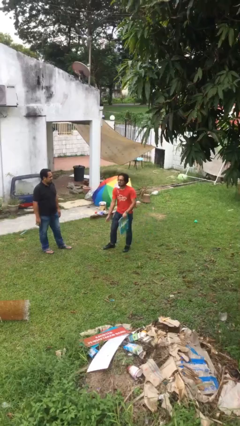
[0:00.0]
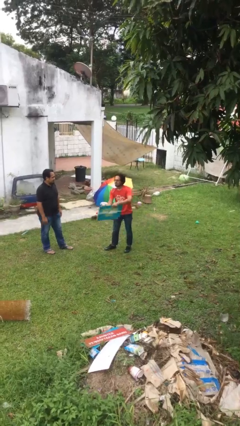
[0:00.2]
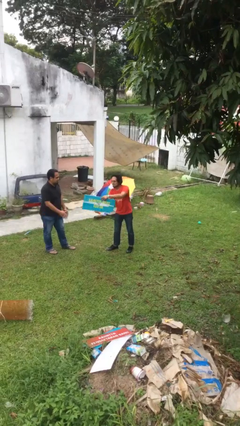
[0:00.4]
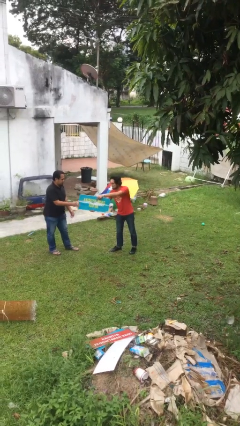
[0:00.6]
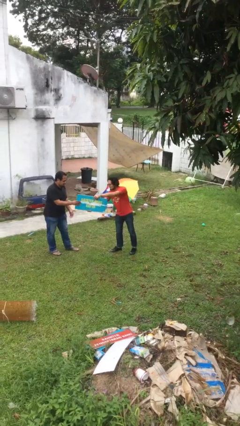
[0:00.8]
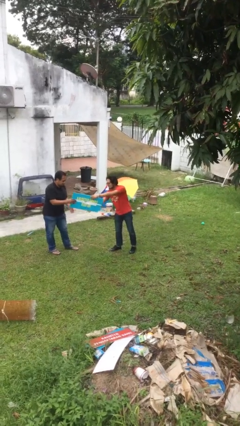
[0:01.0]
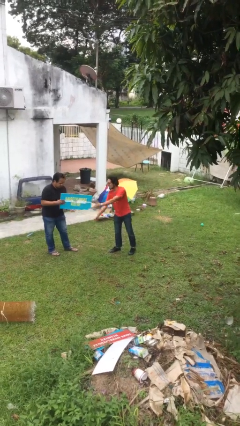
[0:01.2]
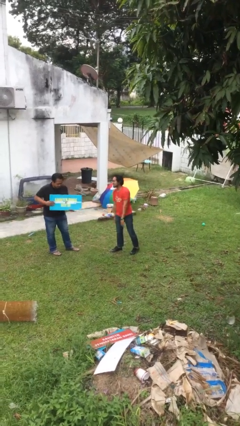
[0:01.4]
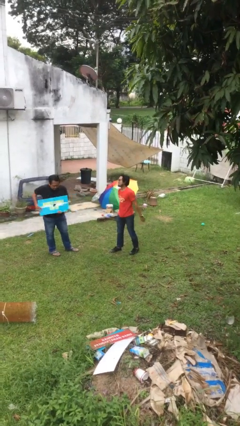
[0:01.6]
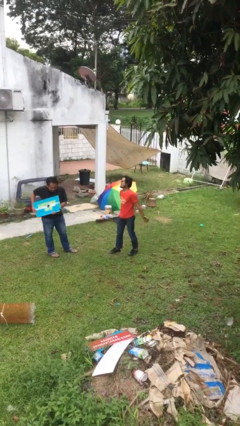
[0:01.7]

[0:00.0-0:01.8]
person transfers object to person

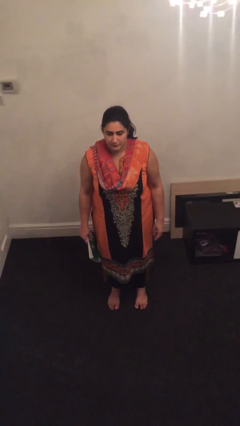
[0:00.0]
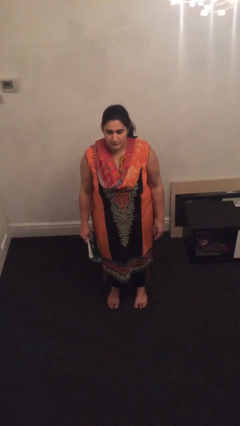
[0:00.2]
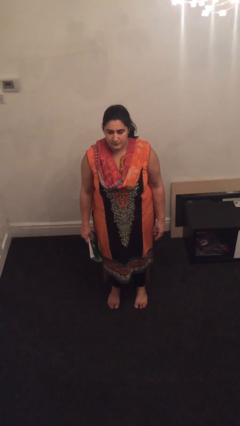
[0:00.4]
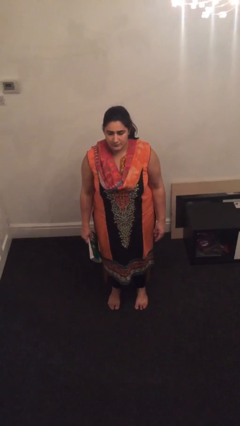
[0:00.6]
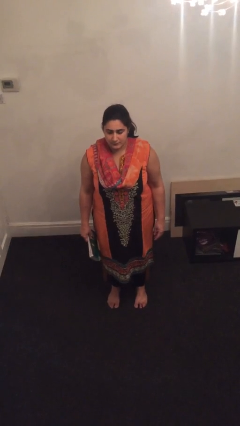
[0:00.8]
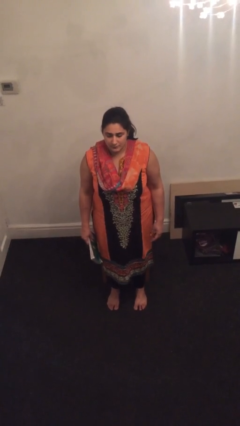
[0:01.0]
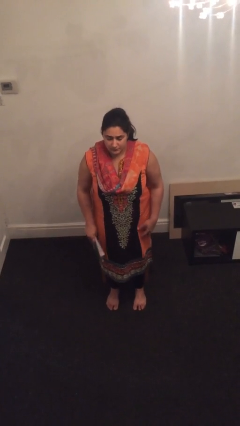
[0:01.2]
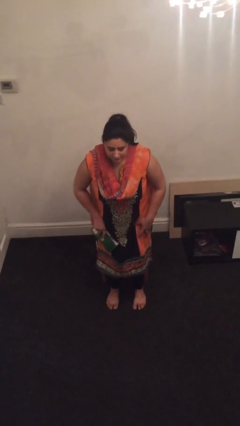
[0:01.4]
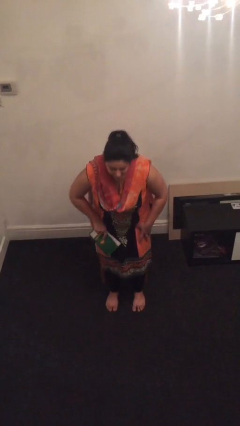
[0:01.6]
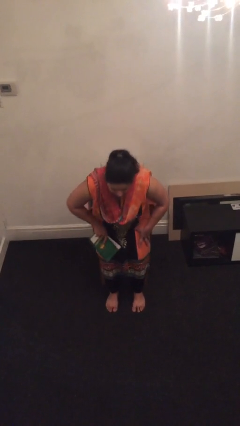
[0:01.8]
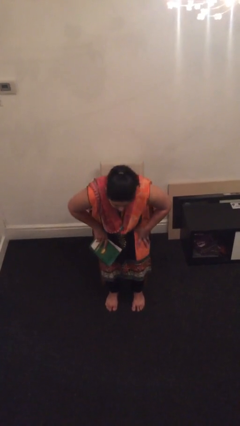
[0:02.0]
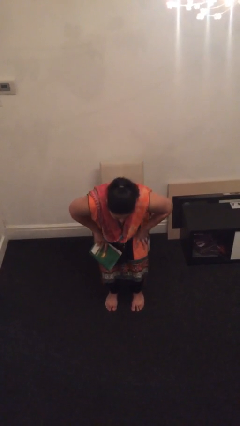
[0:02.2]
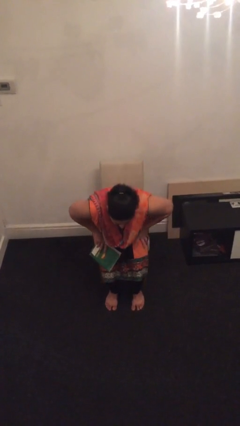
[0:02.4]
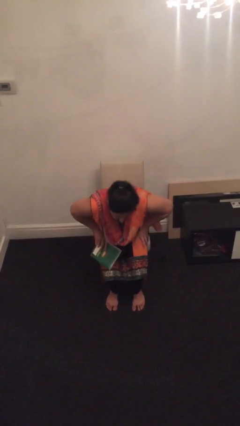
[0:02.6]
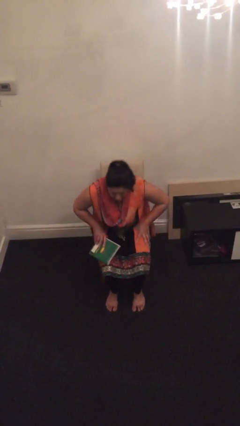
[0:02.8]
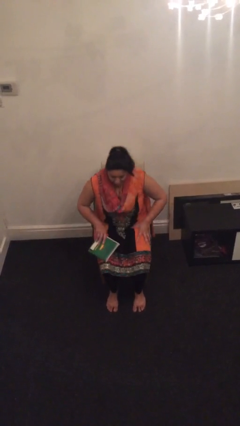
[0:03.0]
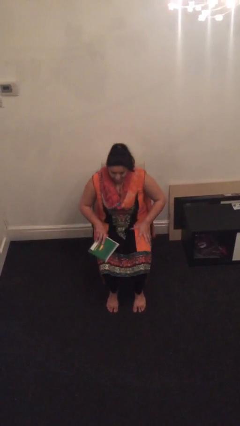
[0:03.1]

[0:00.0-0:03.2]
person sits down

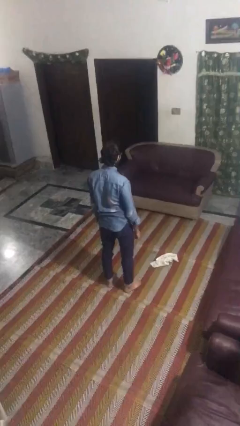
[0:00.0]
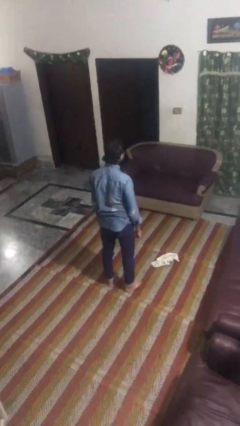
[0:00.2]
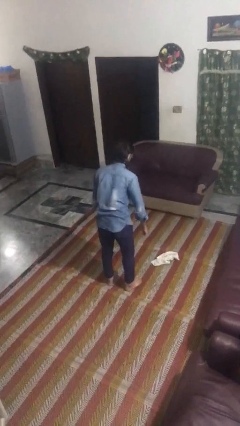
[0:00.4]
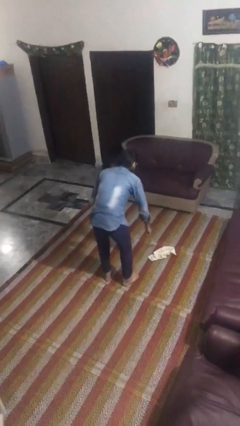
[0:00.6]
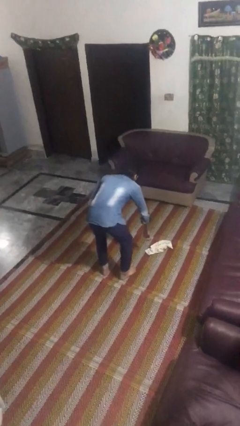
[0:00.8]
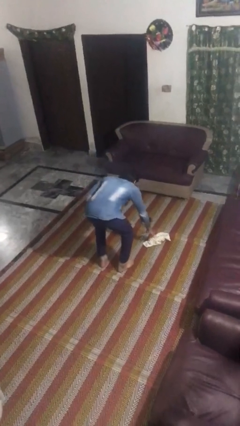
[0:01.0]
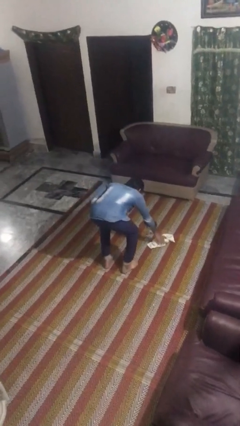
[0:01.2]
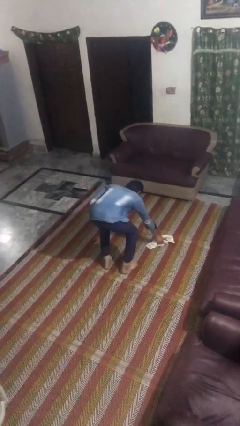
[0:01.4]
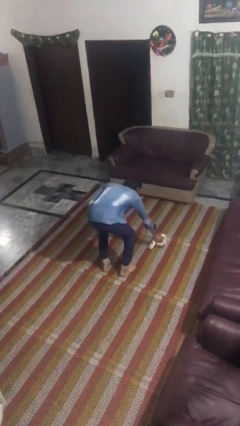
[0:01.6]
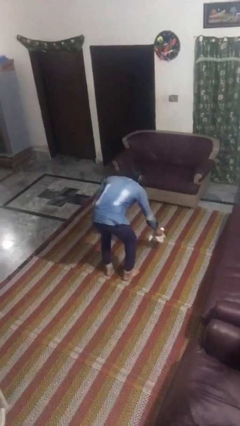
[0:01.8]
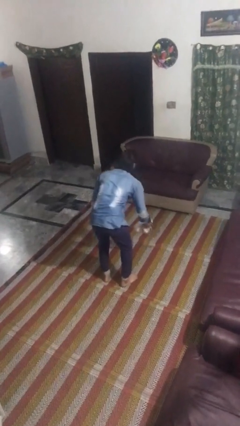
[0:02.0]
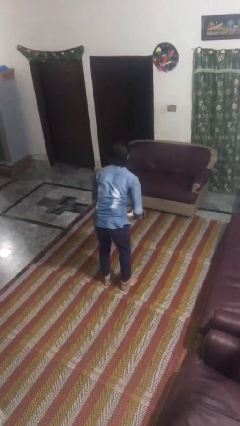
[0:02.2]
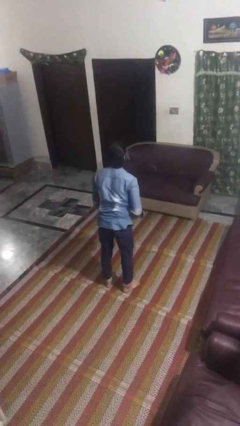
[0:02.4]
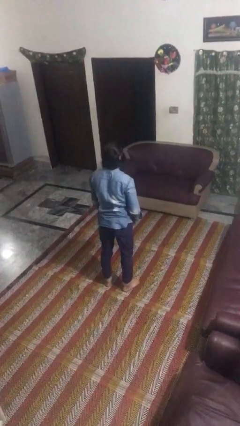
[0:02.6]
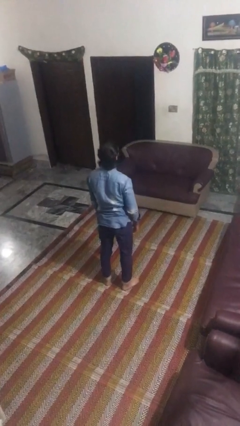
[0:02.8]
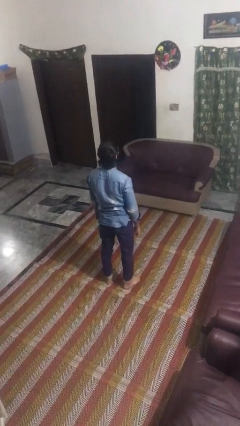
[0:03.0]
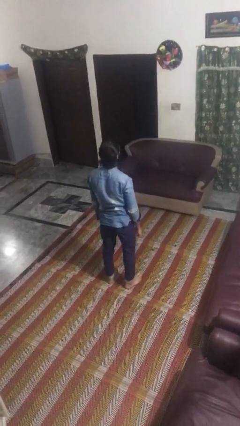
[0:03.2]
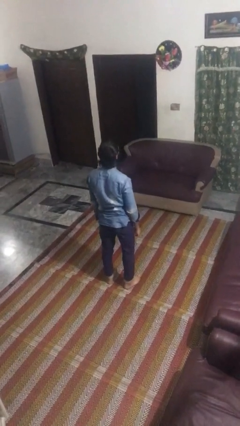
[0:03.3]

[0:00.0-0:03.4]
person picks up object from floor

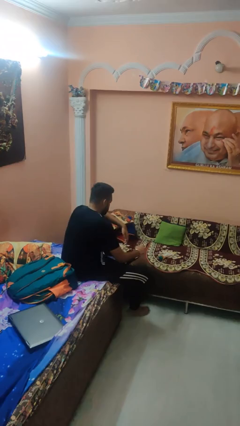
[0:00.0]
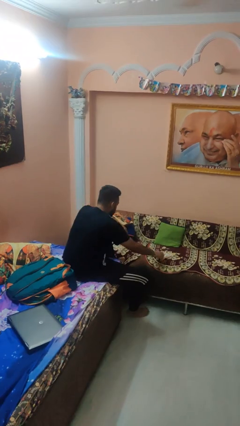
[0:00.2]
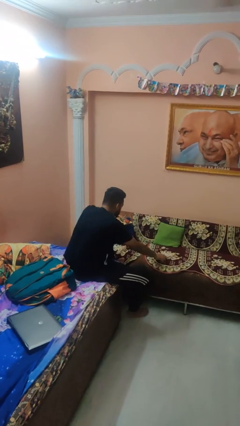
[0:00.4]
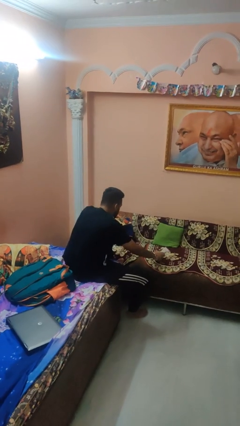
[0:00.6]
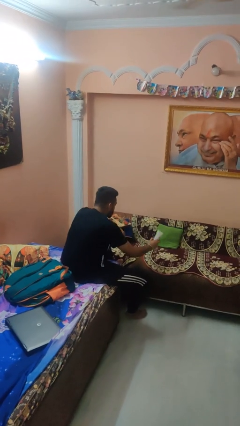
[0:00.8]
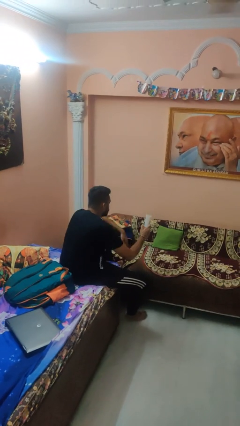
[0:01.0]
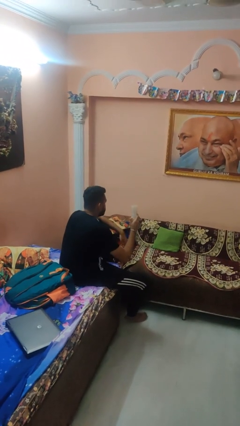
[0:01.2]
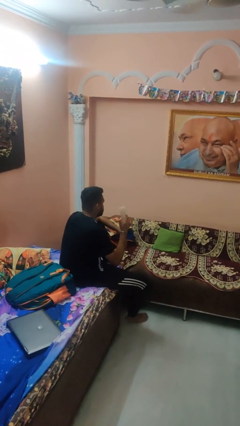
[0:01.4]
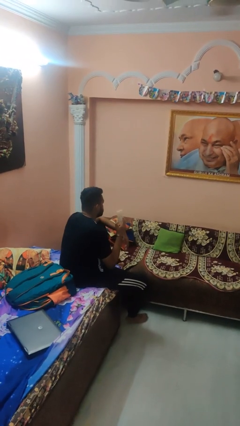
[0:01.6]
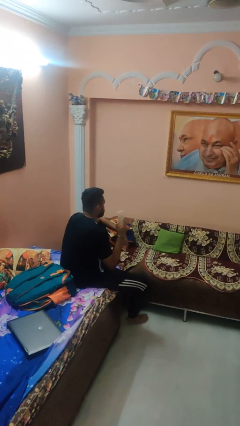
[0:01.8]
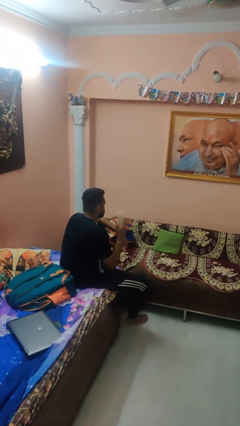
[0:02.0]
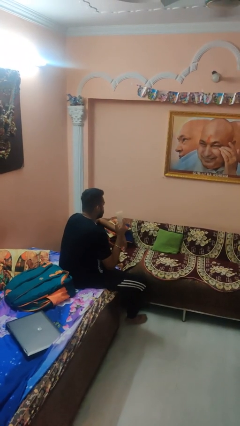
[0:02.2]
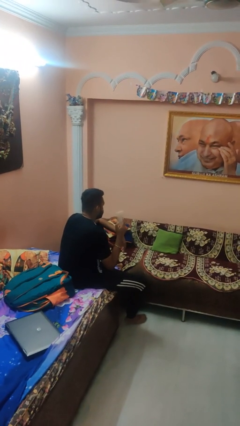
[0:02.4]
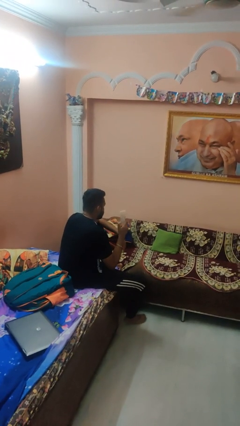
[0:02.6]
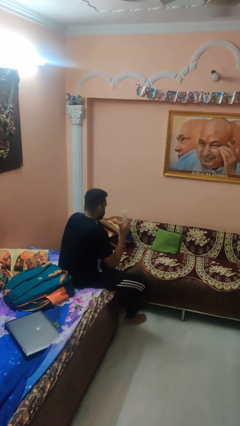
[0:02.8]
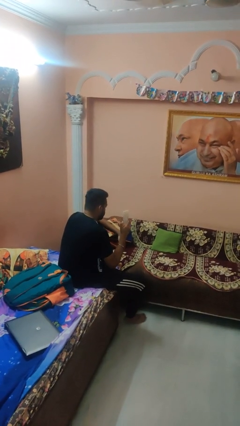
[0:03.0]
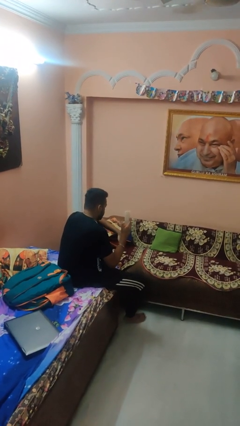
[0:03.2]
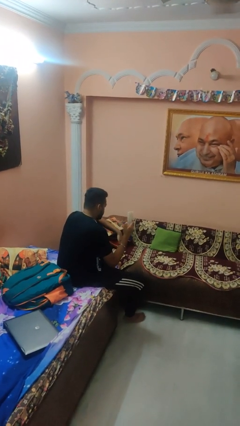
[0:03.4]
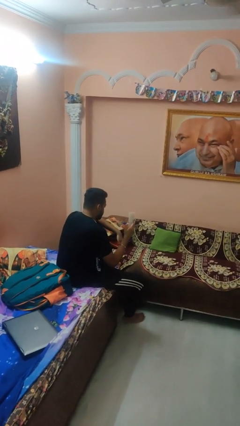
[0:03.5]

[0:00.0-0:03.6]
person picks up object from couch

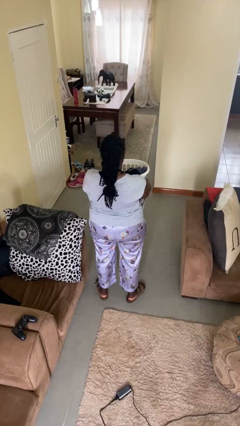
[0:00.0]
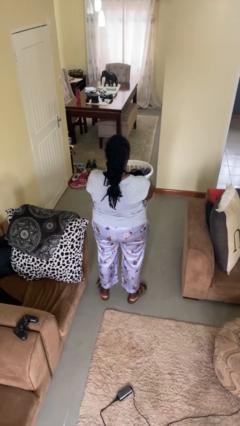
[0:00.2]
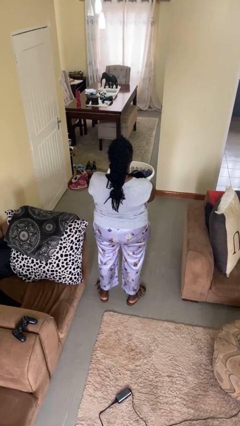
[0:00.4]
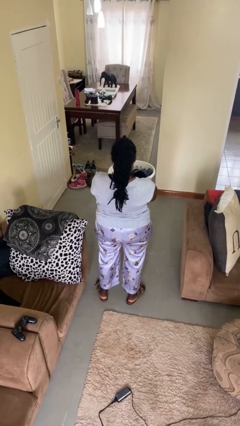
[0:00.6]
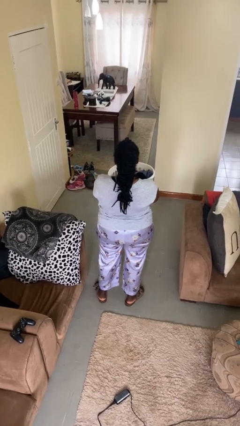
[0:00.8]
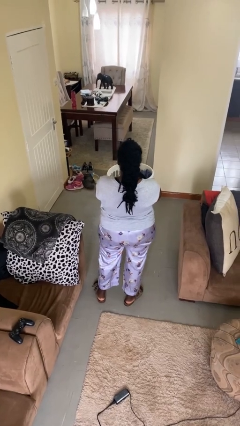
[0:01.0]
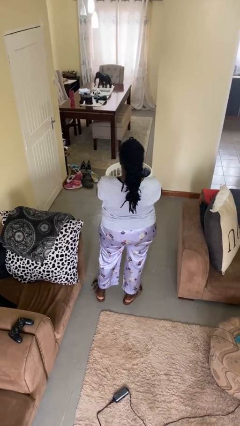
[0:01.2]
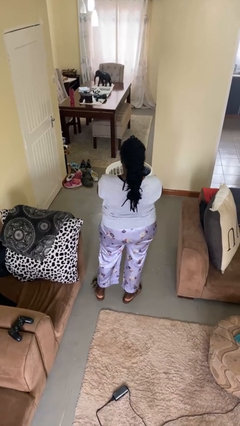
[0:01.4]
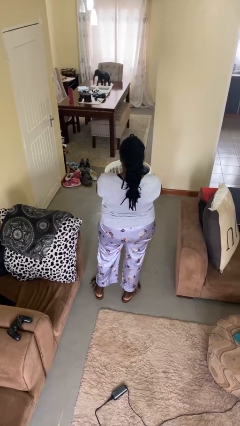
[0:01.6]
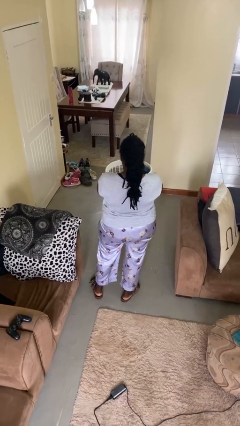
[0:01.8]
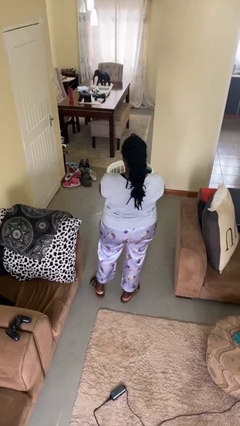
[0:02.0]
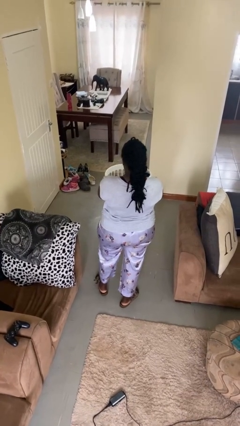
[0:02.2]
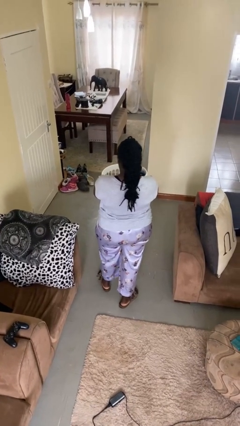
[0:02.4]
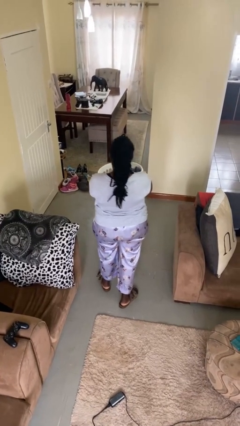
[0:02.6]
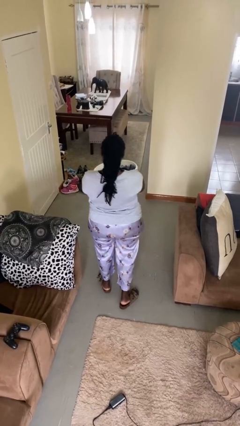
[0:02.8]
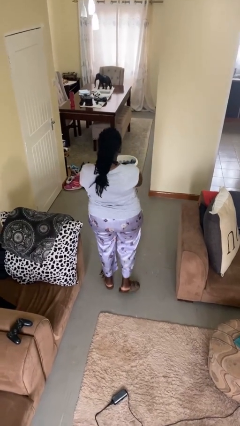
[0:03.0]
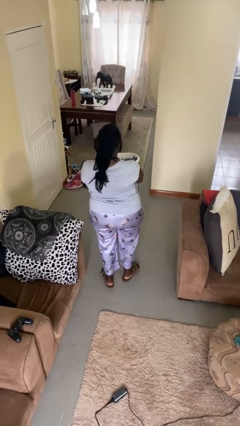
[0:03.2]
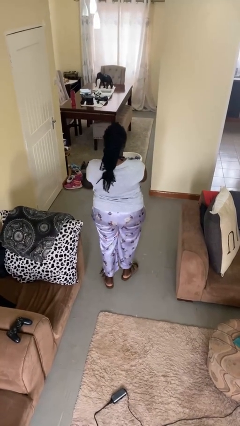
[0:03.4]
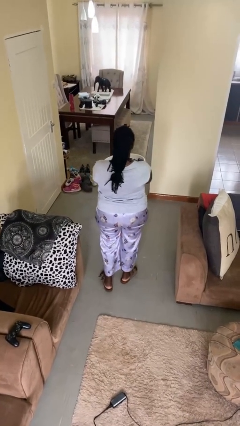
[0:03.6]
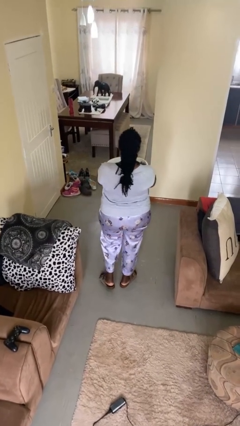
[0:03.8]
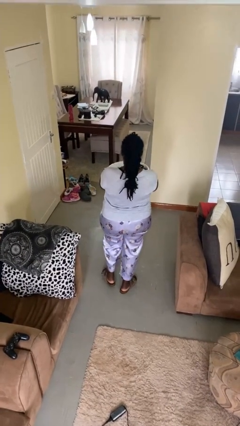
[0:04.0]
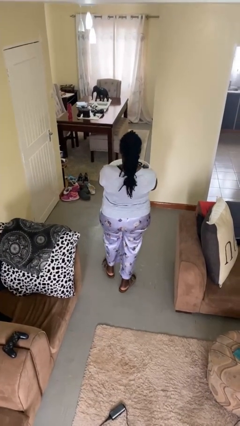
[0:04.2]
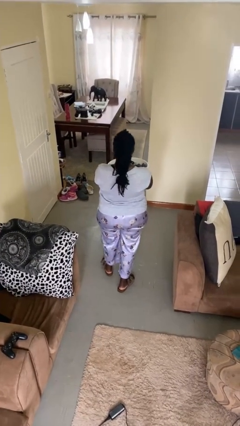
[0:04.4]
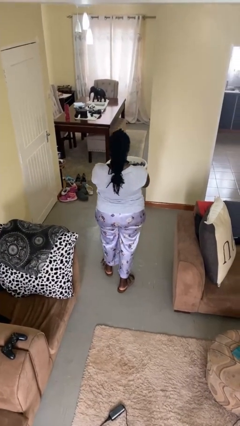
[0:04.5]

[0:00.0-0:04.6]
person carries laundry basket

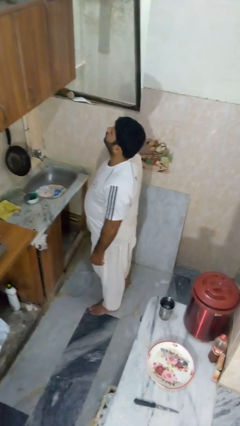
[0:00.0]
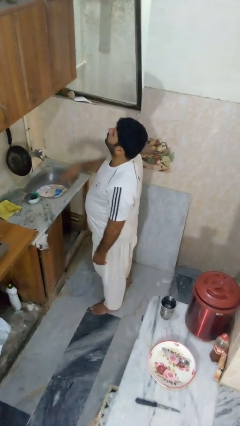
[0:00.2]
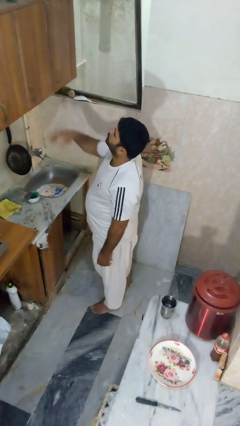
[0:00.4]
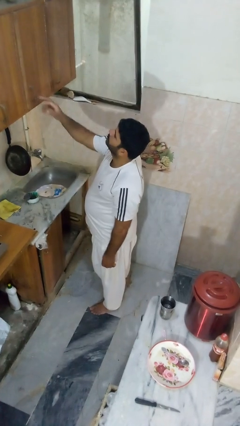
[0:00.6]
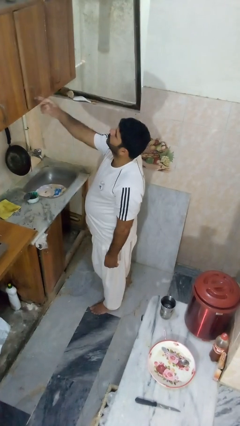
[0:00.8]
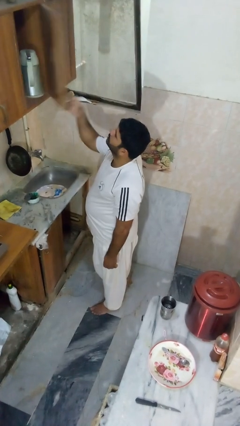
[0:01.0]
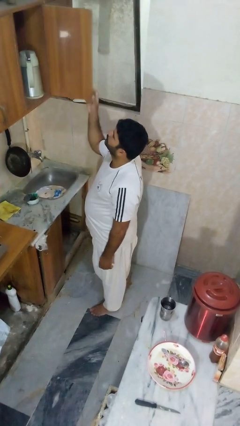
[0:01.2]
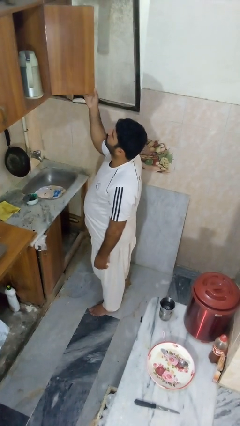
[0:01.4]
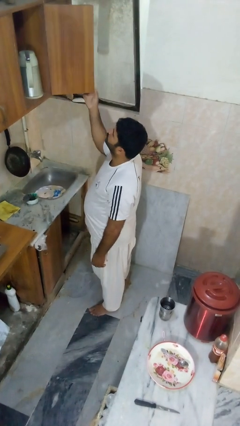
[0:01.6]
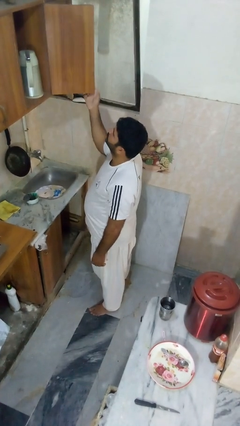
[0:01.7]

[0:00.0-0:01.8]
person opens cabinet
